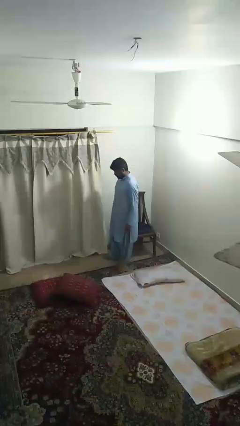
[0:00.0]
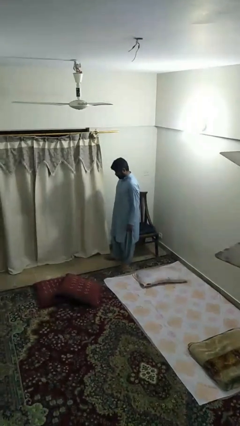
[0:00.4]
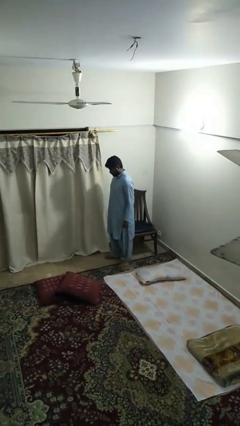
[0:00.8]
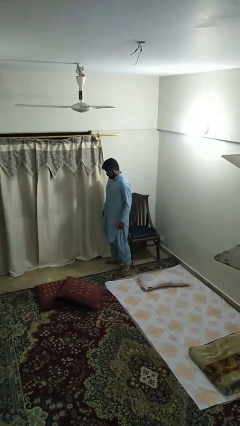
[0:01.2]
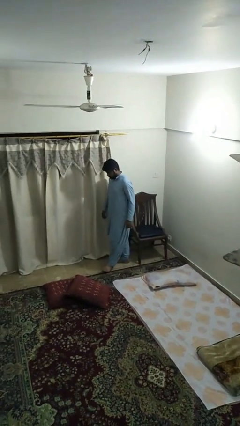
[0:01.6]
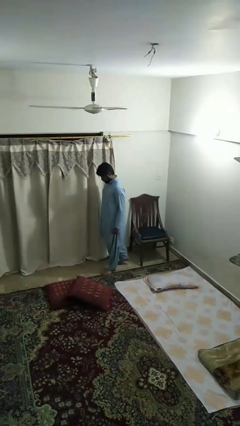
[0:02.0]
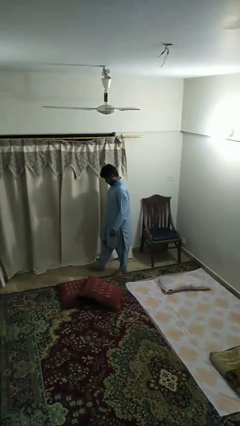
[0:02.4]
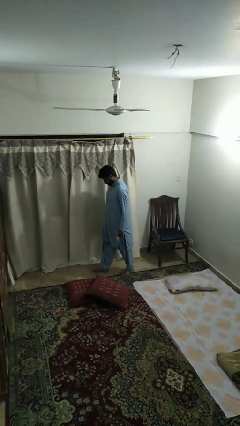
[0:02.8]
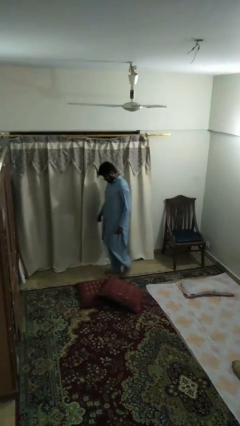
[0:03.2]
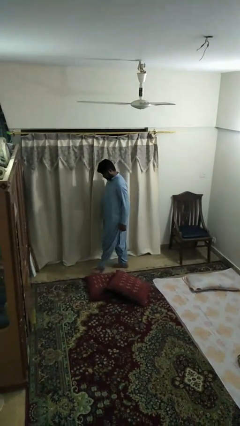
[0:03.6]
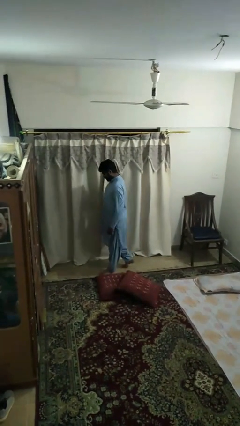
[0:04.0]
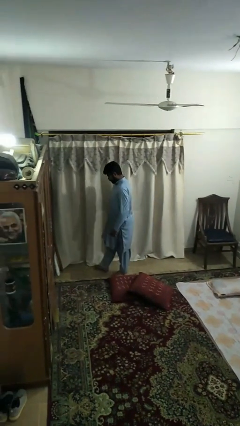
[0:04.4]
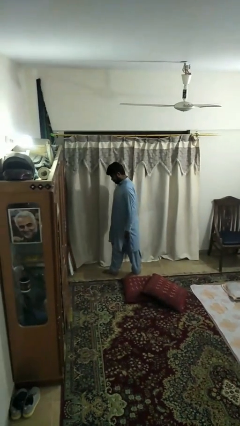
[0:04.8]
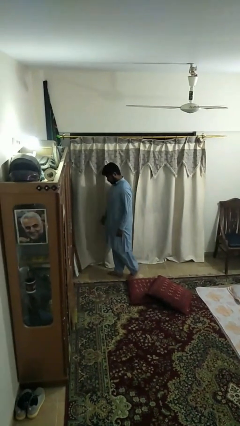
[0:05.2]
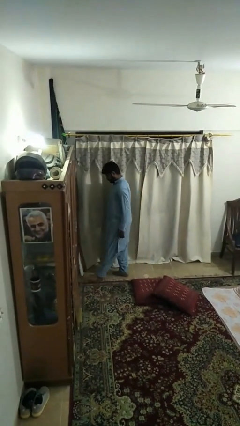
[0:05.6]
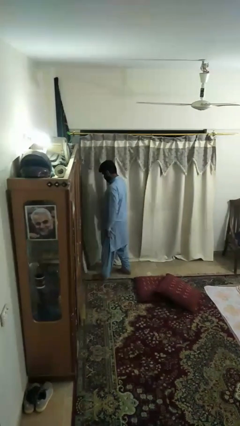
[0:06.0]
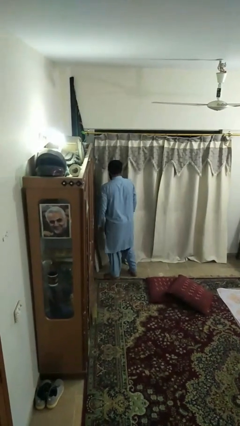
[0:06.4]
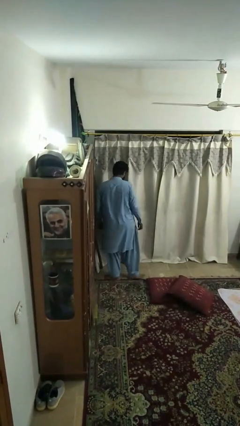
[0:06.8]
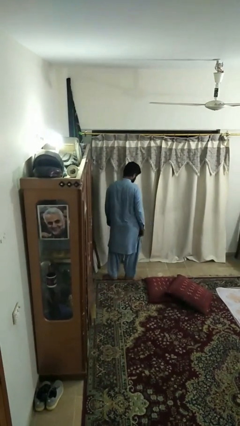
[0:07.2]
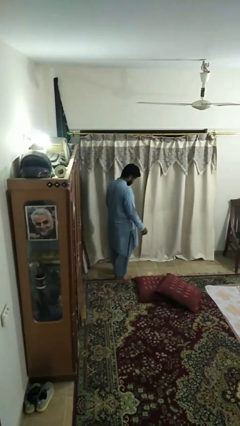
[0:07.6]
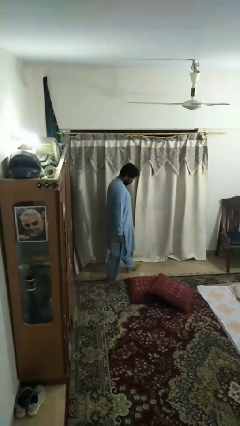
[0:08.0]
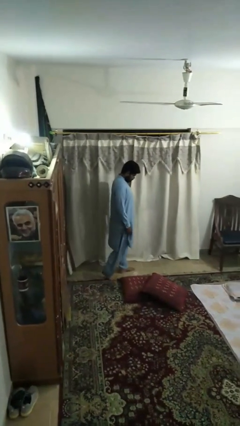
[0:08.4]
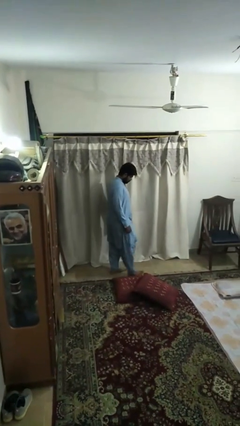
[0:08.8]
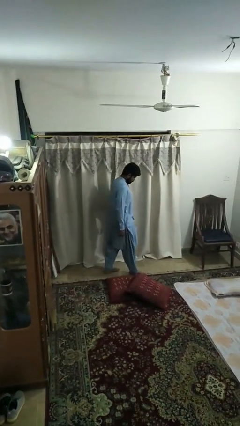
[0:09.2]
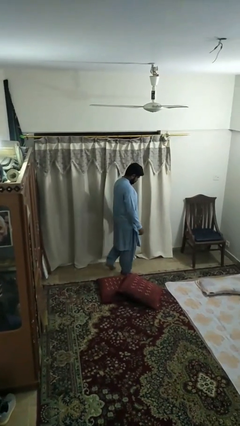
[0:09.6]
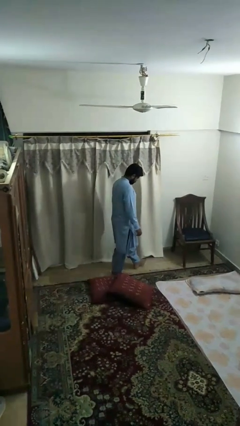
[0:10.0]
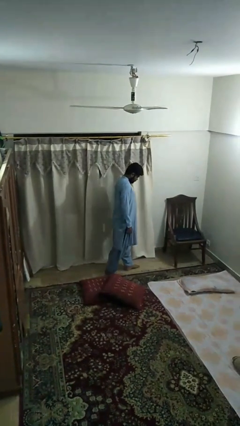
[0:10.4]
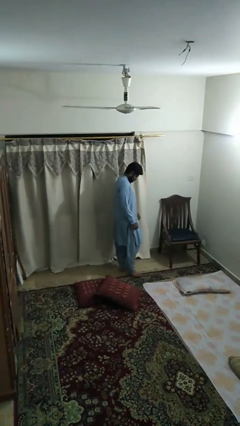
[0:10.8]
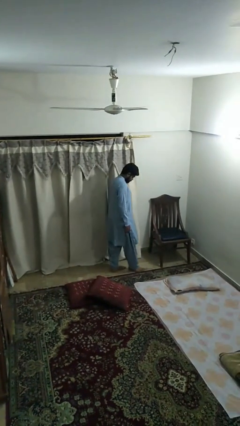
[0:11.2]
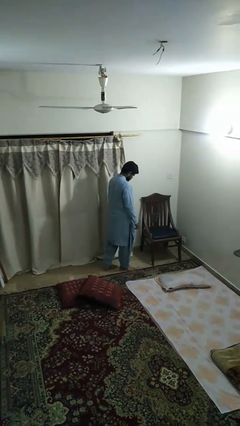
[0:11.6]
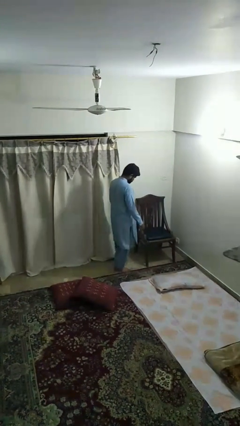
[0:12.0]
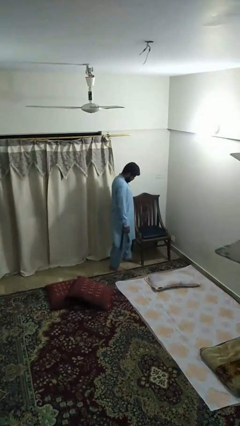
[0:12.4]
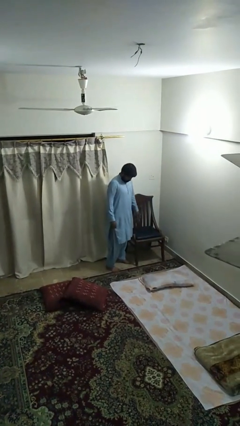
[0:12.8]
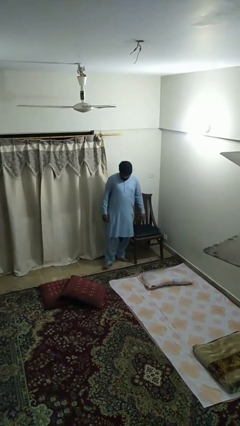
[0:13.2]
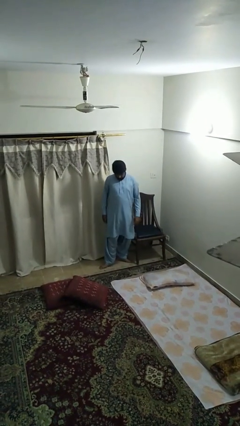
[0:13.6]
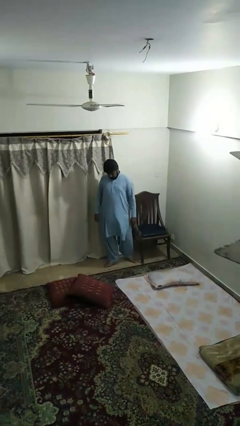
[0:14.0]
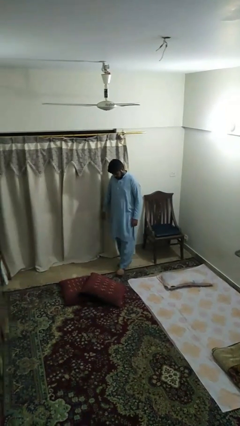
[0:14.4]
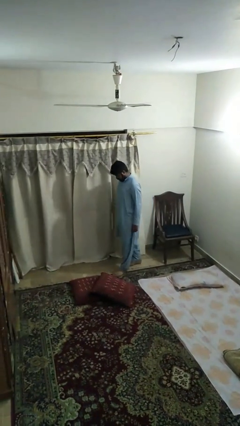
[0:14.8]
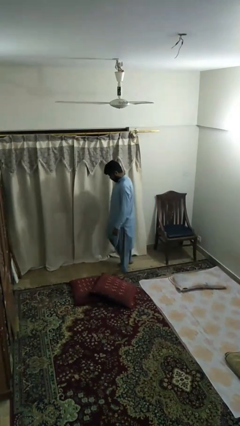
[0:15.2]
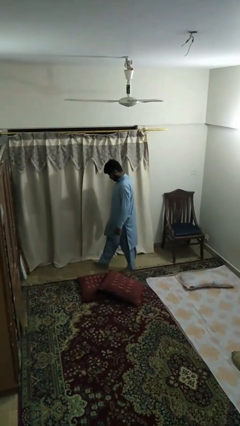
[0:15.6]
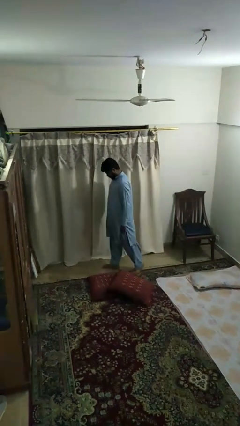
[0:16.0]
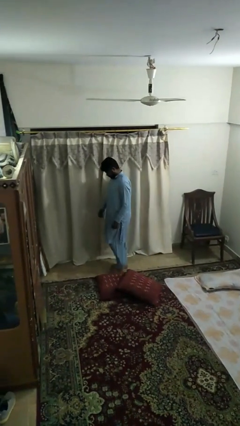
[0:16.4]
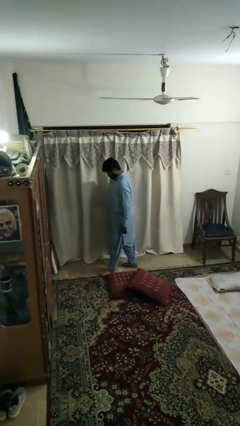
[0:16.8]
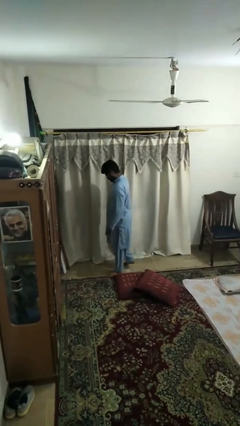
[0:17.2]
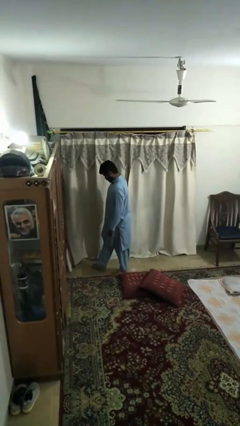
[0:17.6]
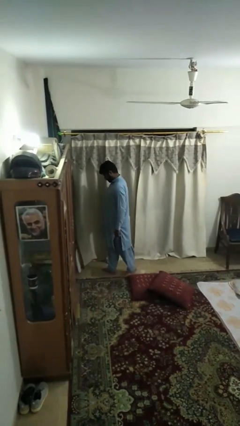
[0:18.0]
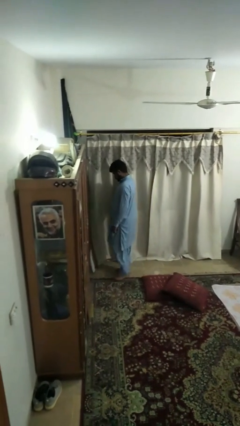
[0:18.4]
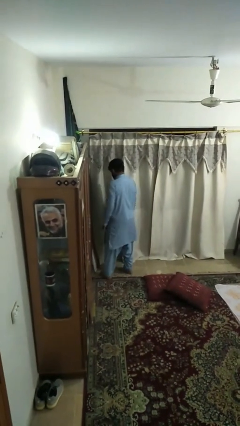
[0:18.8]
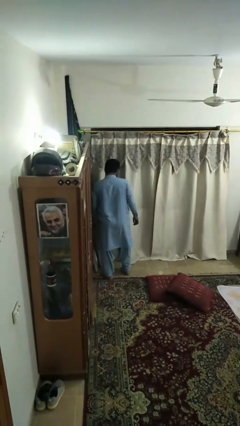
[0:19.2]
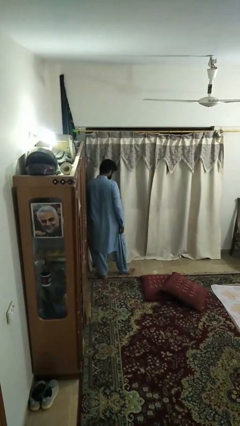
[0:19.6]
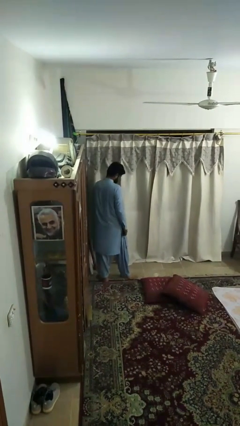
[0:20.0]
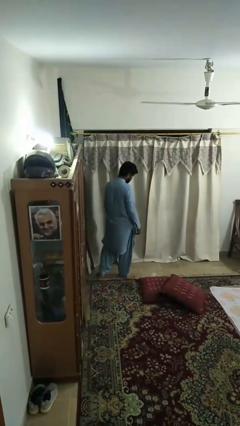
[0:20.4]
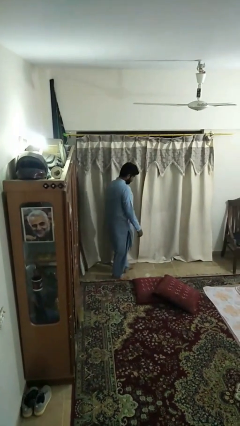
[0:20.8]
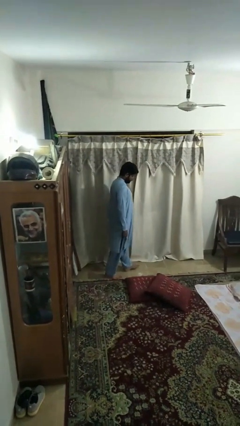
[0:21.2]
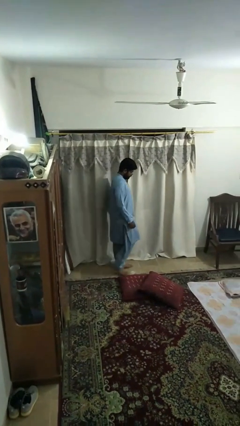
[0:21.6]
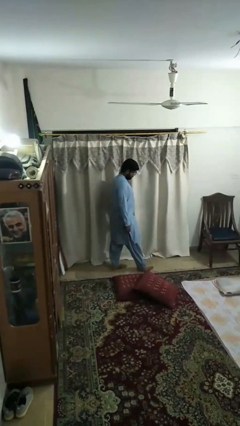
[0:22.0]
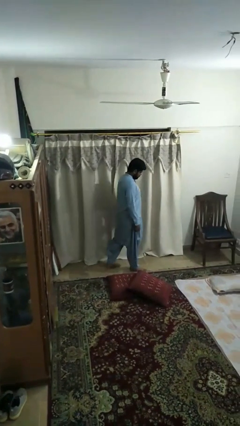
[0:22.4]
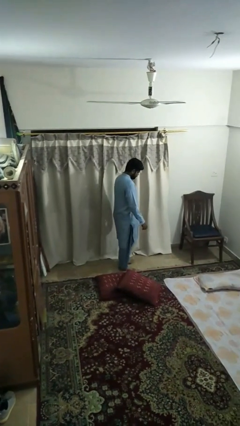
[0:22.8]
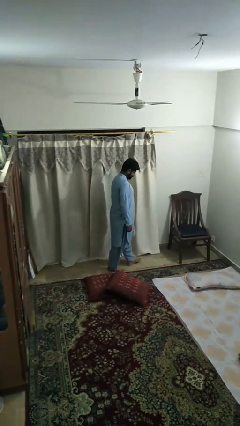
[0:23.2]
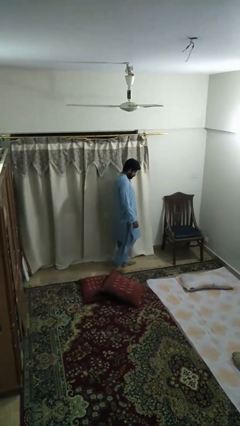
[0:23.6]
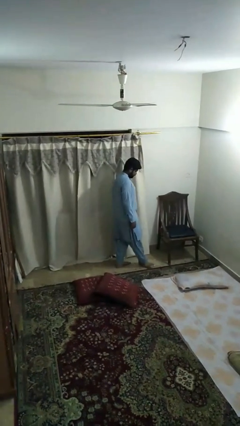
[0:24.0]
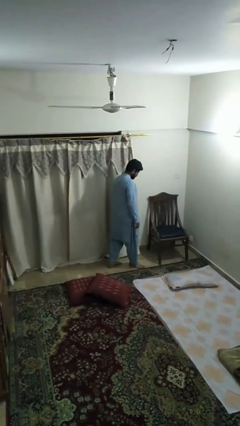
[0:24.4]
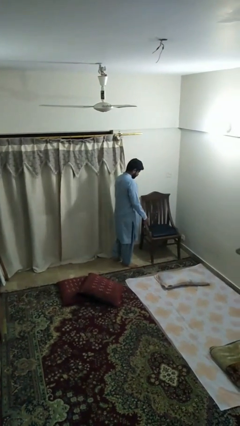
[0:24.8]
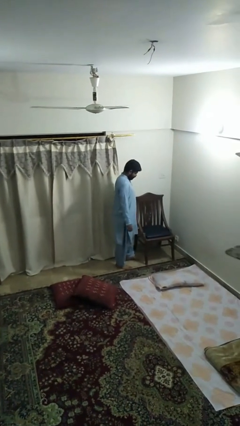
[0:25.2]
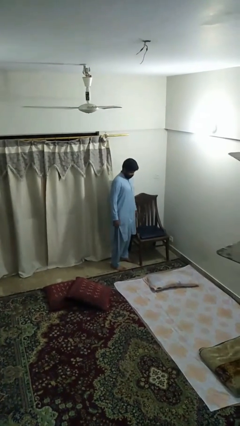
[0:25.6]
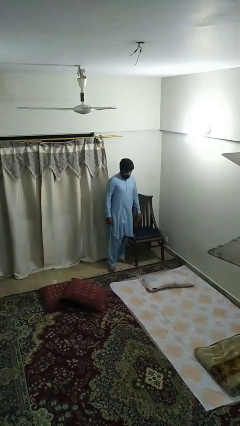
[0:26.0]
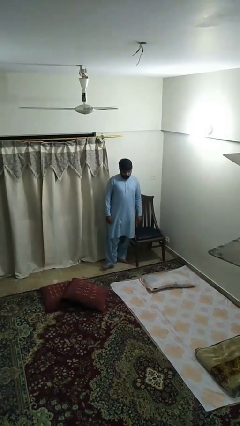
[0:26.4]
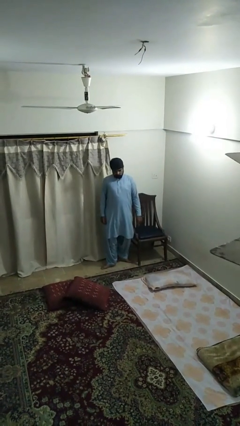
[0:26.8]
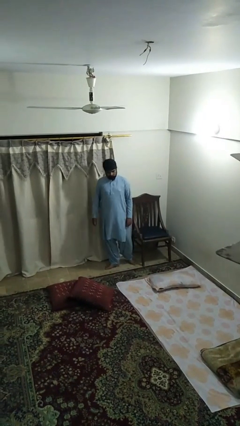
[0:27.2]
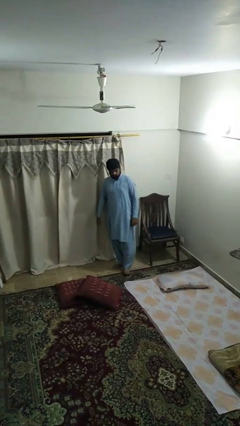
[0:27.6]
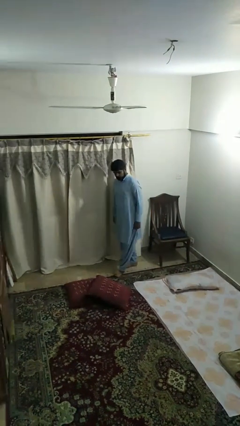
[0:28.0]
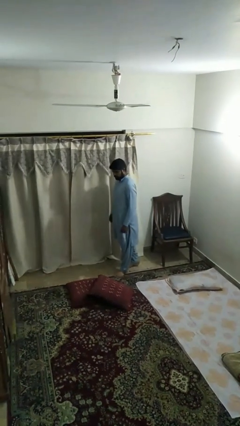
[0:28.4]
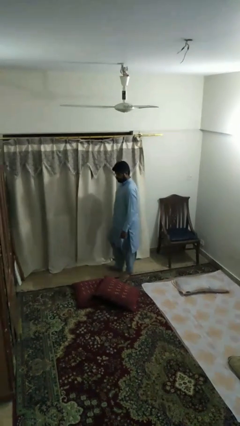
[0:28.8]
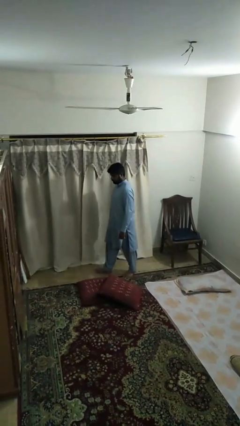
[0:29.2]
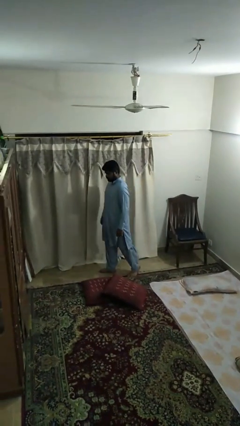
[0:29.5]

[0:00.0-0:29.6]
person walks
